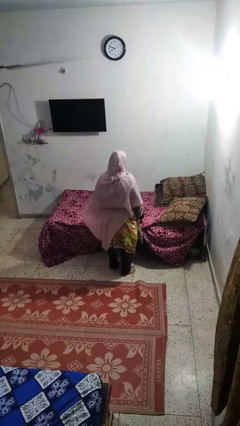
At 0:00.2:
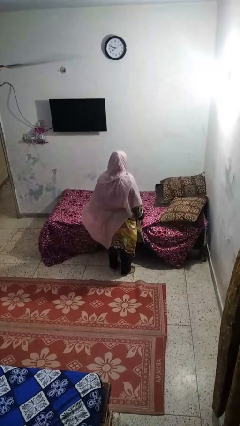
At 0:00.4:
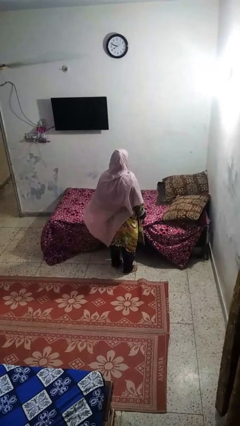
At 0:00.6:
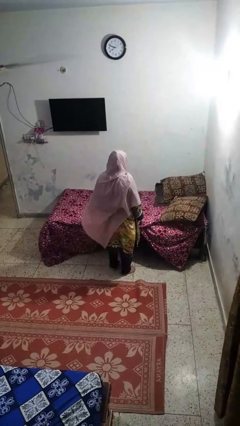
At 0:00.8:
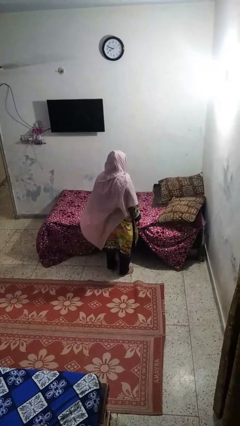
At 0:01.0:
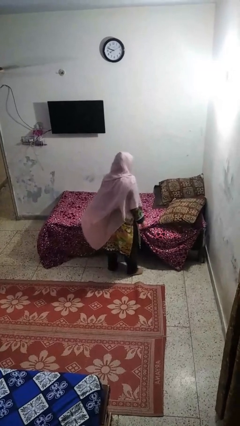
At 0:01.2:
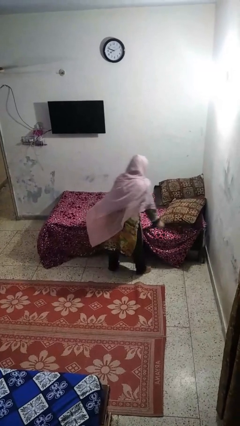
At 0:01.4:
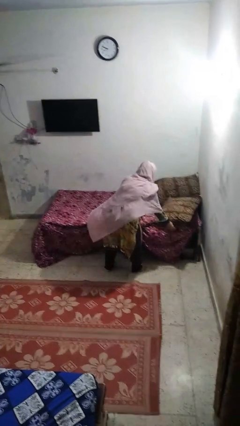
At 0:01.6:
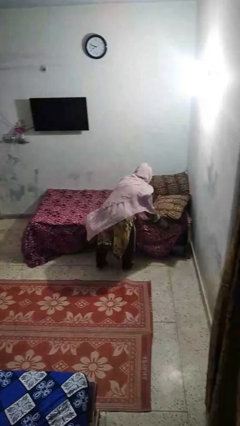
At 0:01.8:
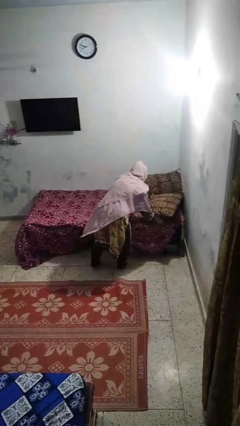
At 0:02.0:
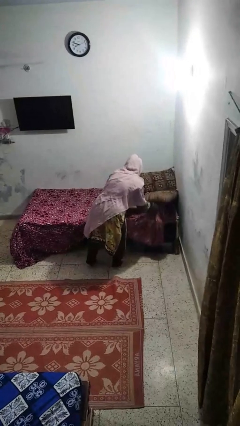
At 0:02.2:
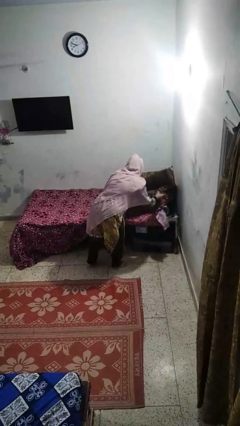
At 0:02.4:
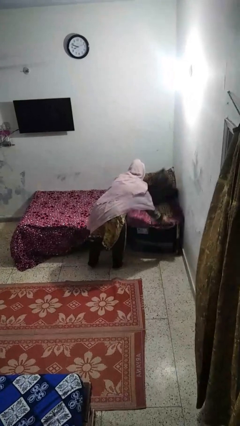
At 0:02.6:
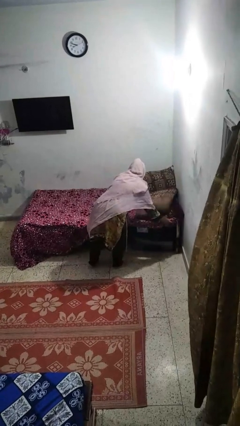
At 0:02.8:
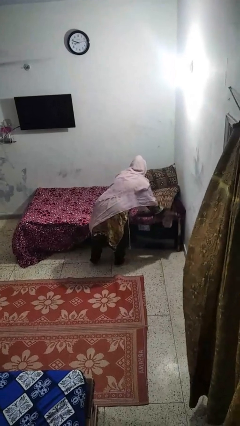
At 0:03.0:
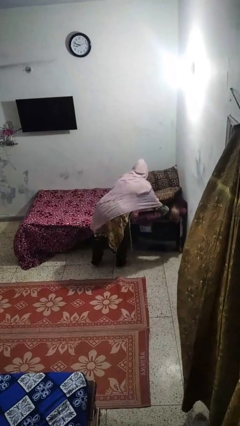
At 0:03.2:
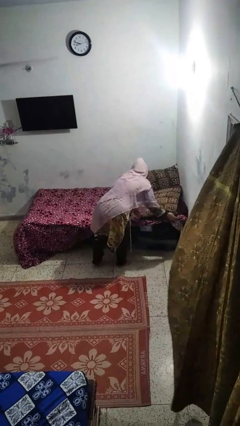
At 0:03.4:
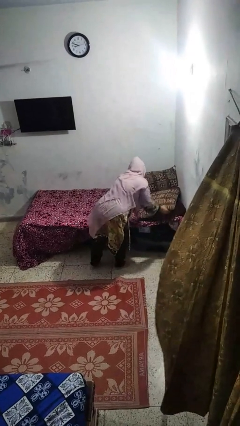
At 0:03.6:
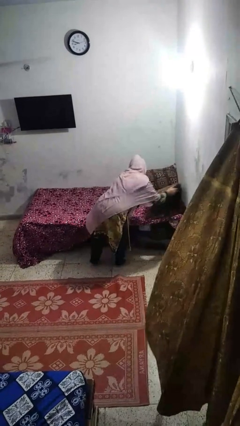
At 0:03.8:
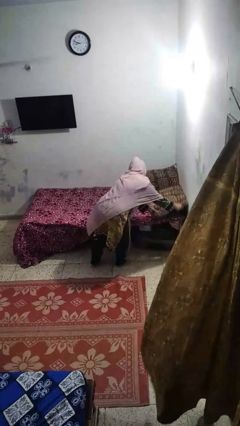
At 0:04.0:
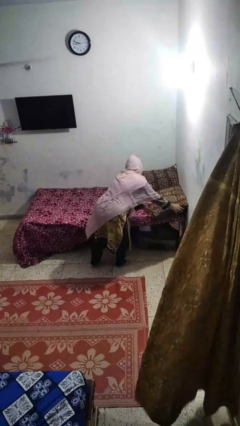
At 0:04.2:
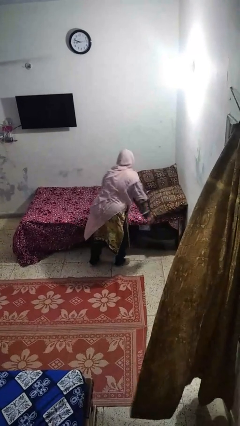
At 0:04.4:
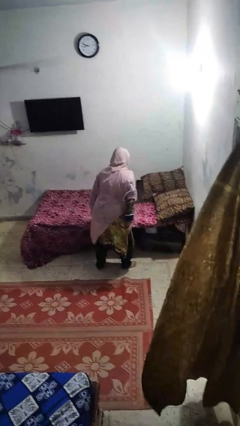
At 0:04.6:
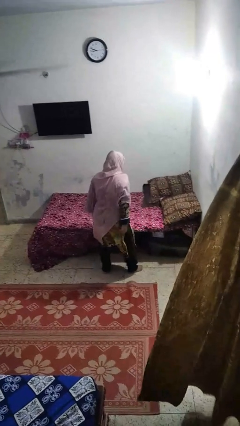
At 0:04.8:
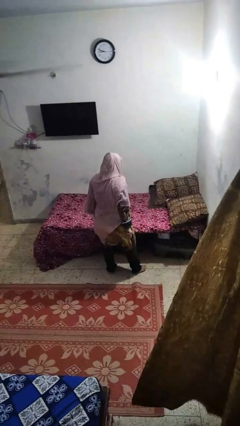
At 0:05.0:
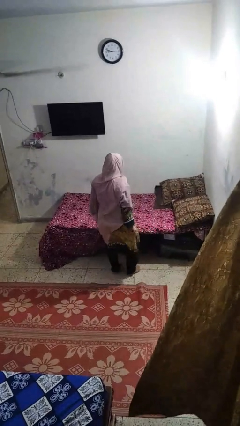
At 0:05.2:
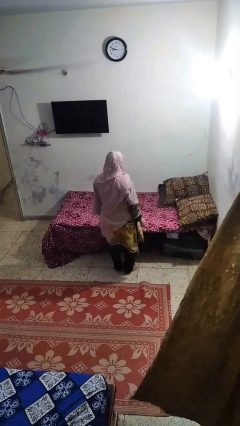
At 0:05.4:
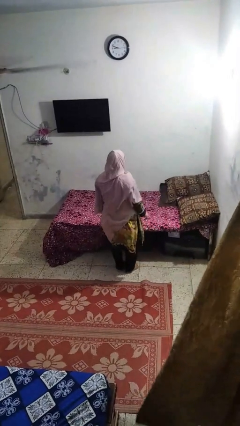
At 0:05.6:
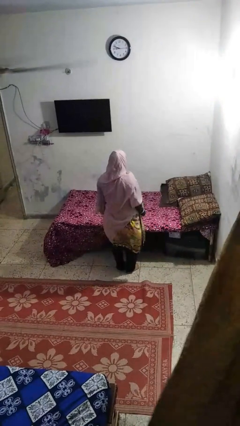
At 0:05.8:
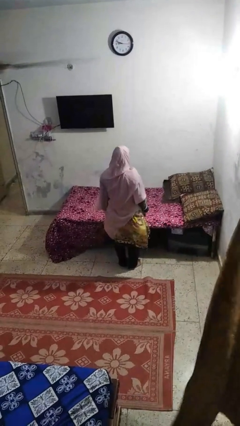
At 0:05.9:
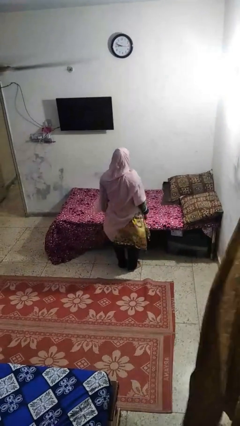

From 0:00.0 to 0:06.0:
person makes bed

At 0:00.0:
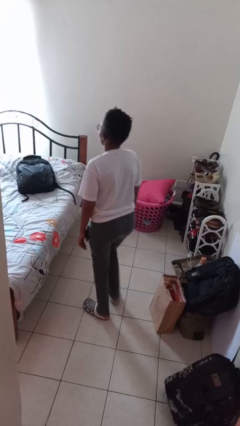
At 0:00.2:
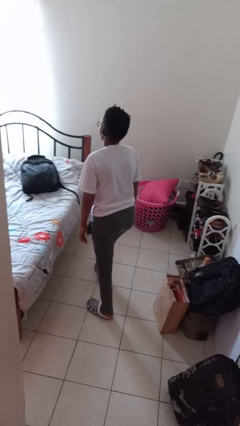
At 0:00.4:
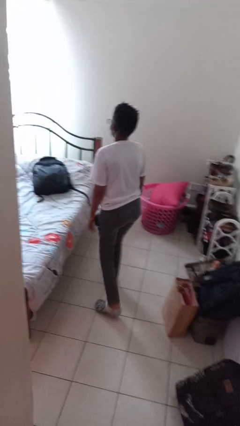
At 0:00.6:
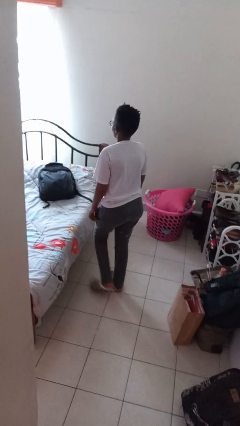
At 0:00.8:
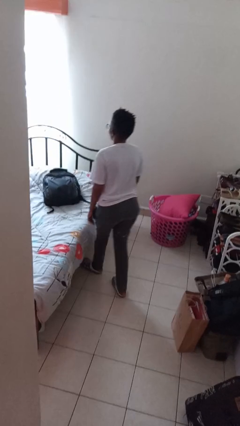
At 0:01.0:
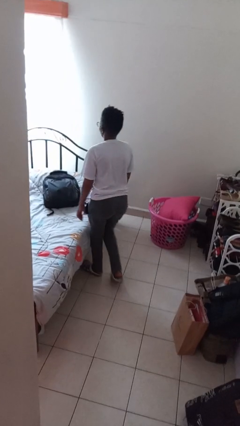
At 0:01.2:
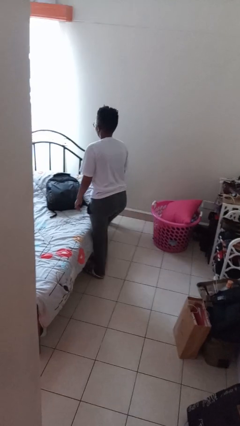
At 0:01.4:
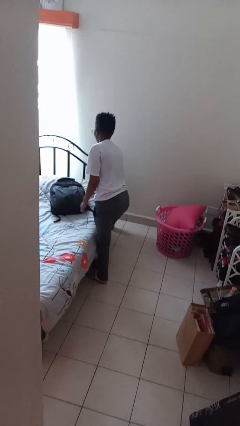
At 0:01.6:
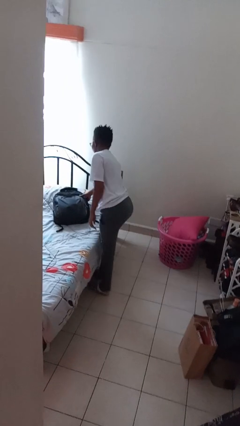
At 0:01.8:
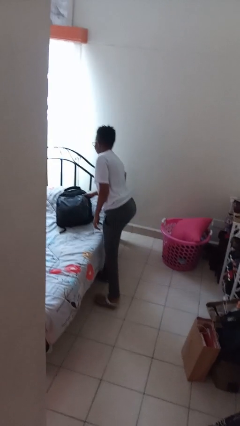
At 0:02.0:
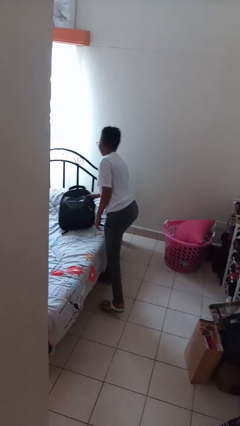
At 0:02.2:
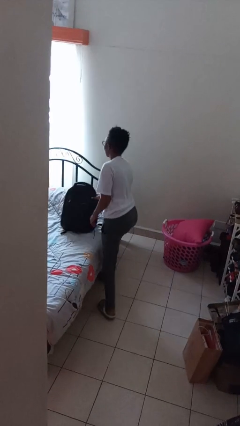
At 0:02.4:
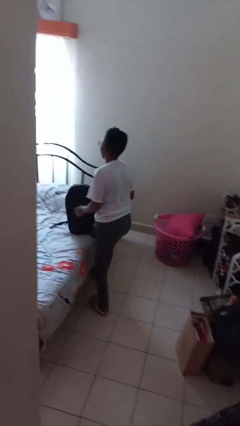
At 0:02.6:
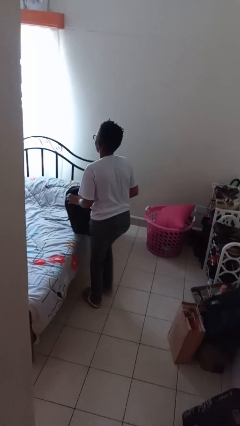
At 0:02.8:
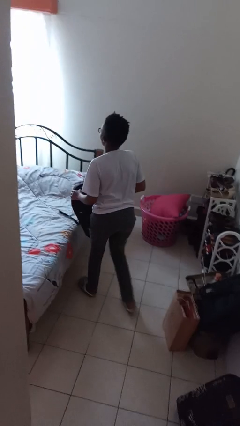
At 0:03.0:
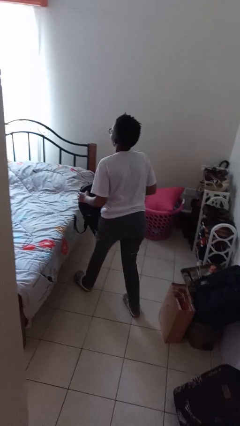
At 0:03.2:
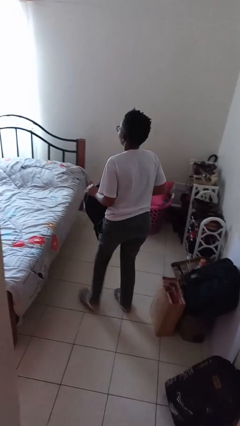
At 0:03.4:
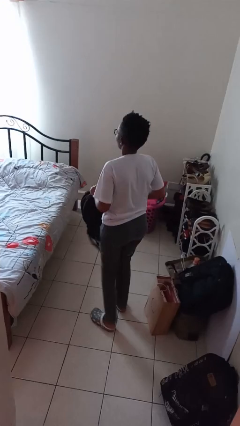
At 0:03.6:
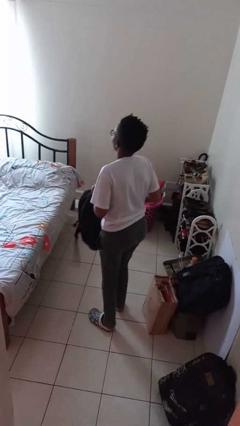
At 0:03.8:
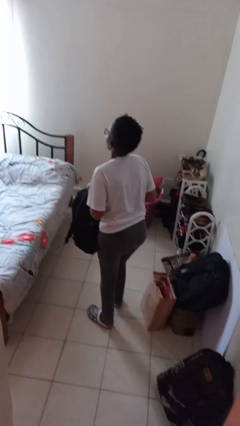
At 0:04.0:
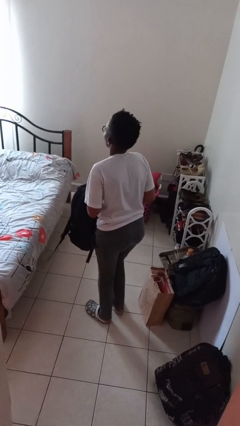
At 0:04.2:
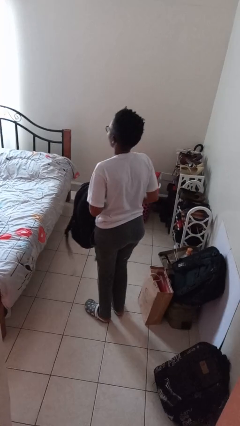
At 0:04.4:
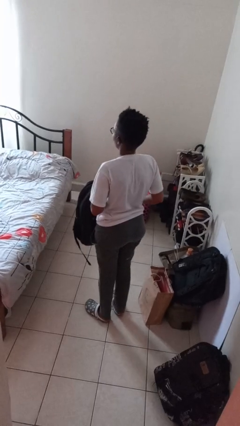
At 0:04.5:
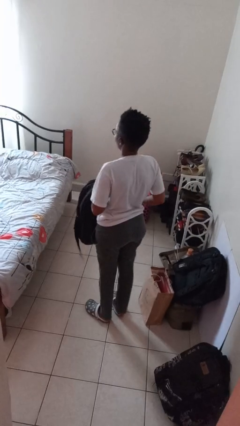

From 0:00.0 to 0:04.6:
person picks up object from bed

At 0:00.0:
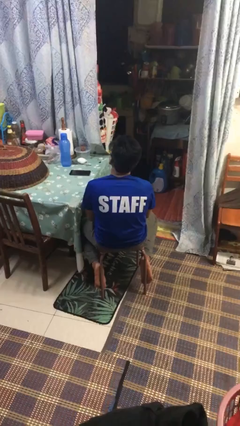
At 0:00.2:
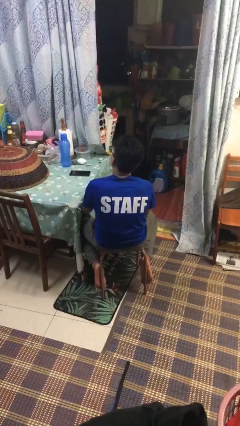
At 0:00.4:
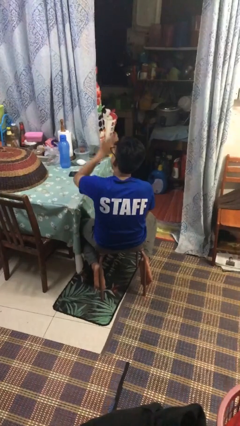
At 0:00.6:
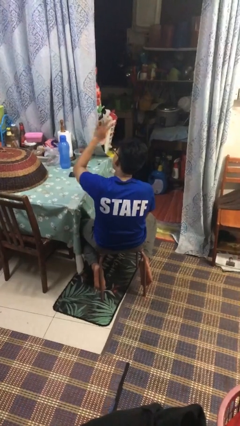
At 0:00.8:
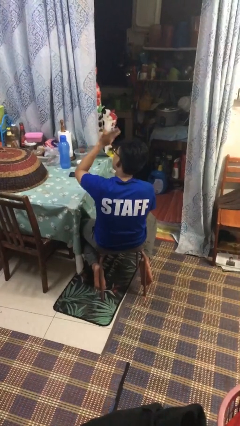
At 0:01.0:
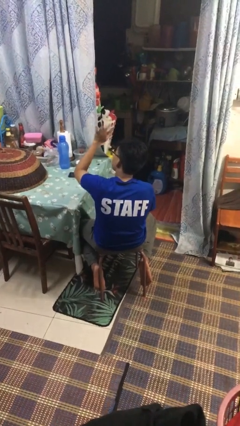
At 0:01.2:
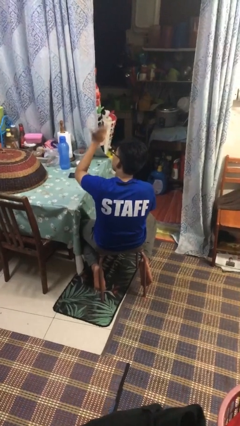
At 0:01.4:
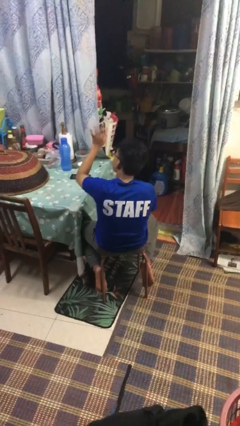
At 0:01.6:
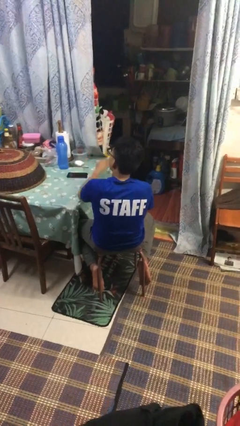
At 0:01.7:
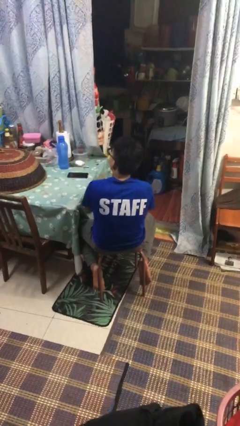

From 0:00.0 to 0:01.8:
person waves at person

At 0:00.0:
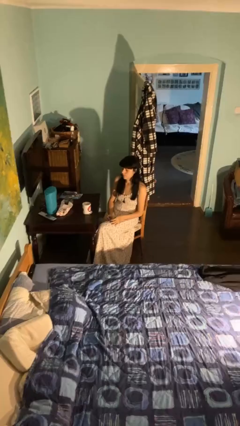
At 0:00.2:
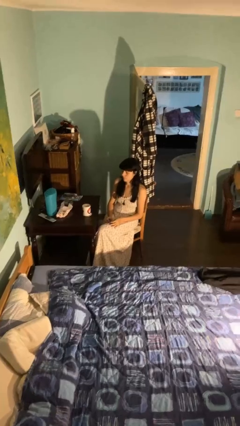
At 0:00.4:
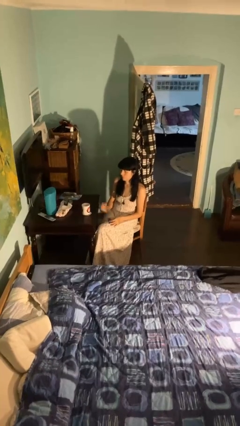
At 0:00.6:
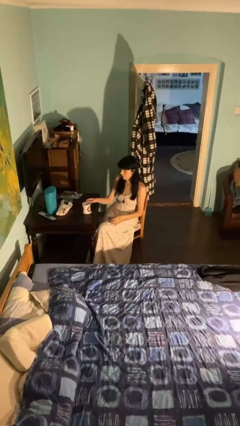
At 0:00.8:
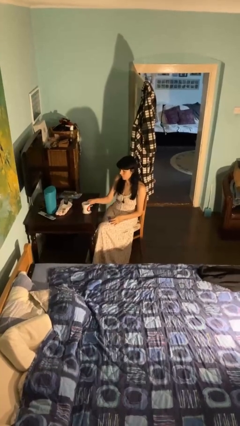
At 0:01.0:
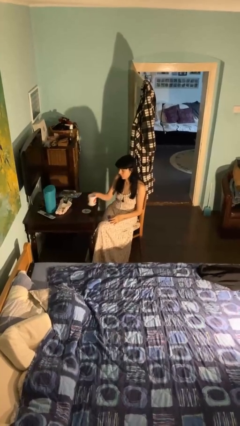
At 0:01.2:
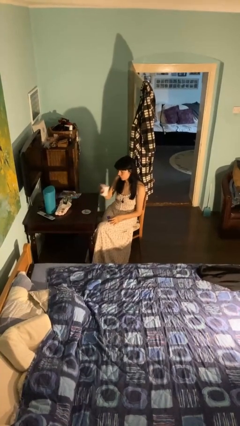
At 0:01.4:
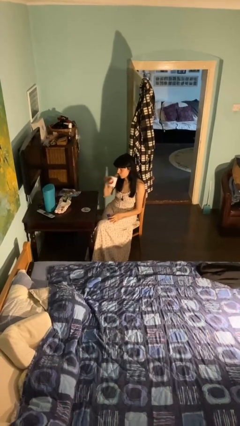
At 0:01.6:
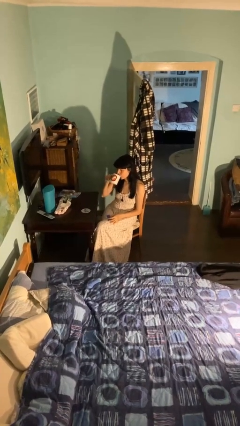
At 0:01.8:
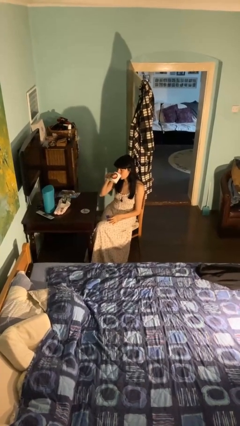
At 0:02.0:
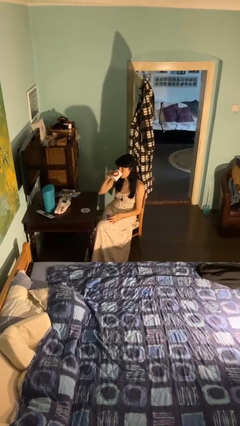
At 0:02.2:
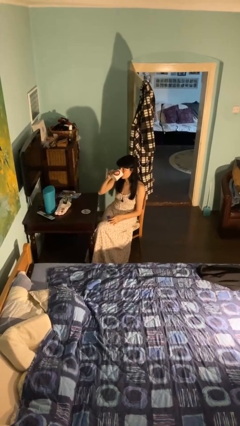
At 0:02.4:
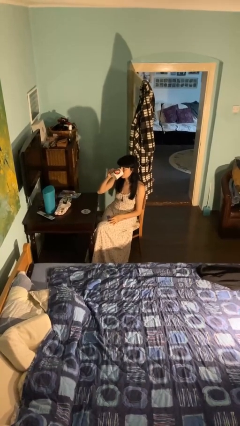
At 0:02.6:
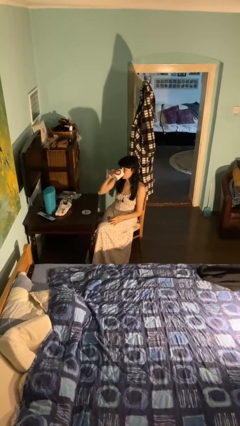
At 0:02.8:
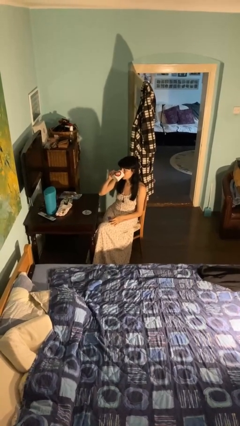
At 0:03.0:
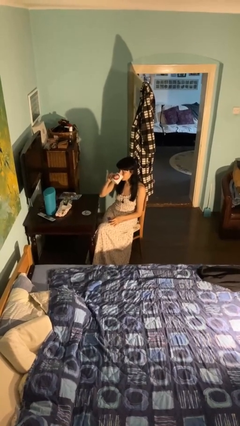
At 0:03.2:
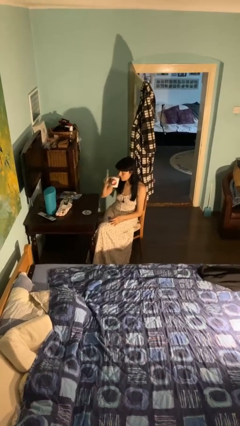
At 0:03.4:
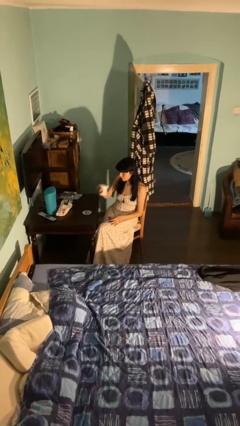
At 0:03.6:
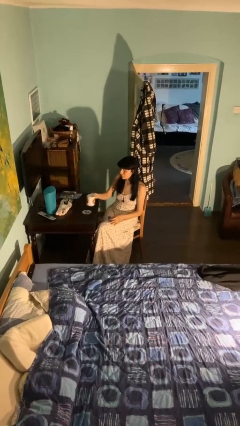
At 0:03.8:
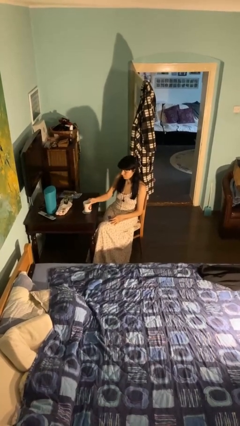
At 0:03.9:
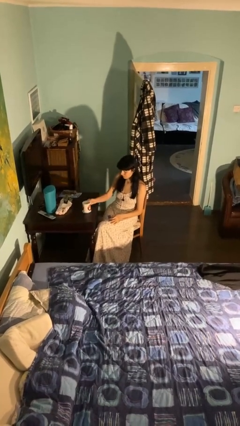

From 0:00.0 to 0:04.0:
person drinks from cup

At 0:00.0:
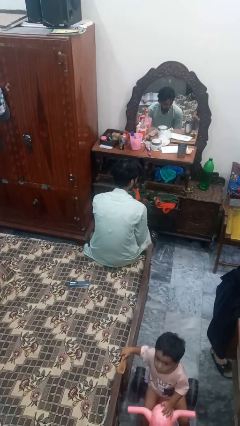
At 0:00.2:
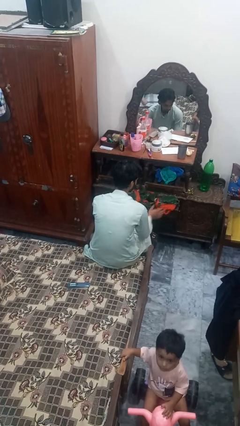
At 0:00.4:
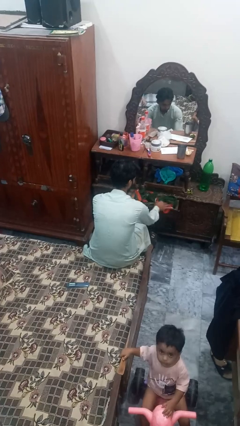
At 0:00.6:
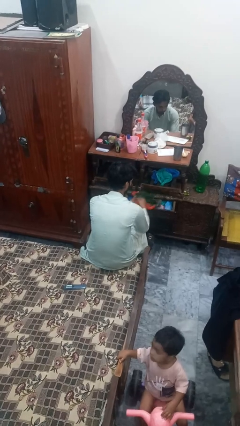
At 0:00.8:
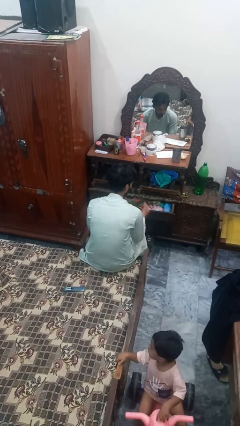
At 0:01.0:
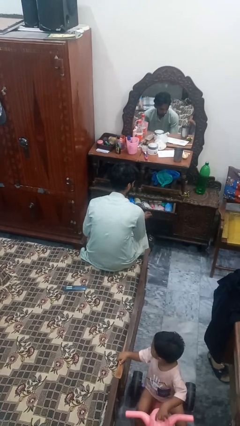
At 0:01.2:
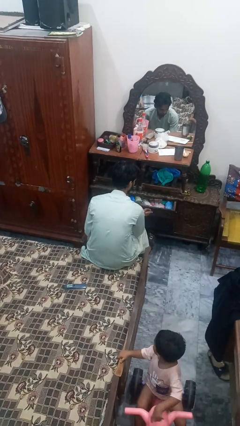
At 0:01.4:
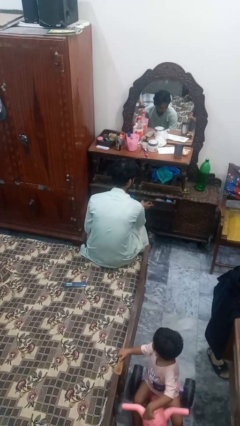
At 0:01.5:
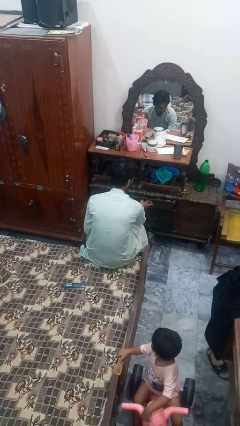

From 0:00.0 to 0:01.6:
person takes clothes from dresser
